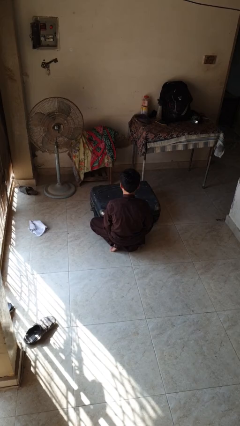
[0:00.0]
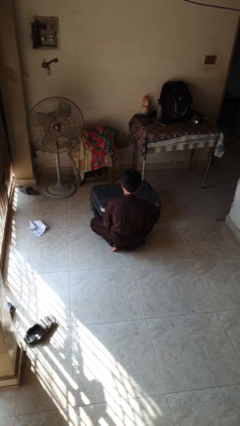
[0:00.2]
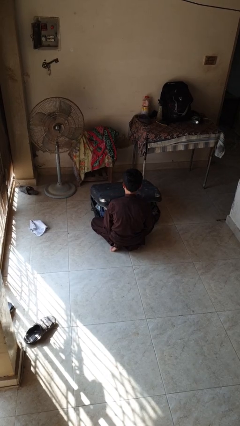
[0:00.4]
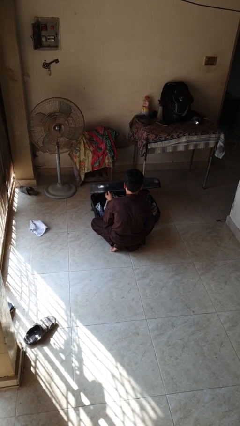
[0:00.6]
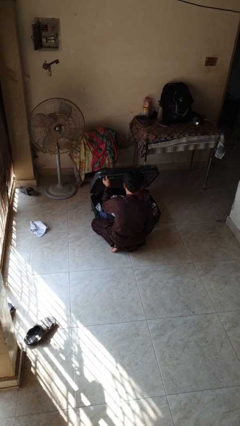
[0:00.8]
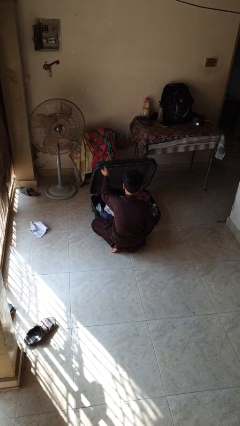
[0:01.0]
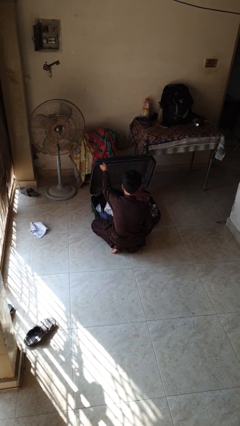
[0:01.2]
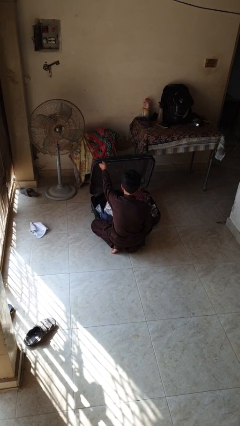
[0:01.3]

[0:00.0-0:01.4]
person opens suitcase

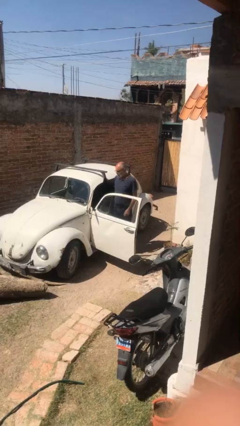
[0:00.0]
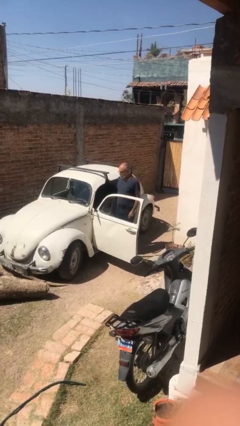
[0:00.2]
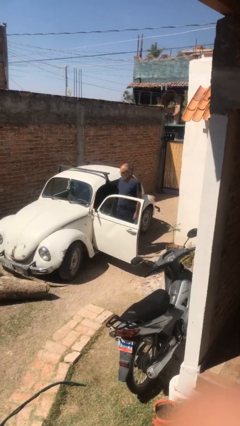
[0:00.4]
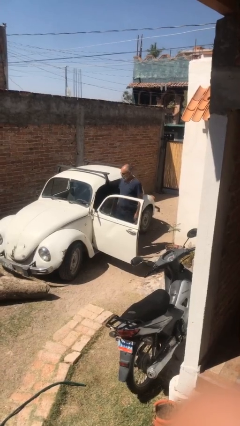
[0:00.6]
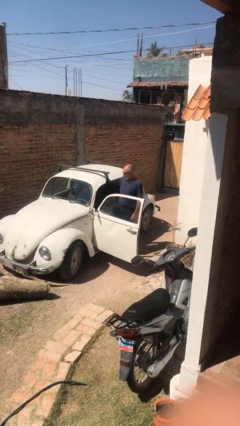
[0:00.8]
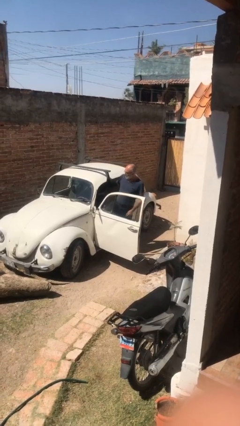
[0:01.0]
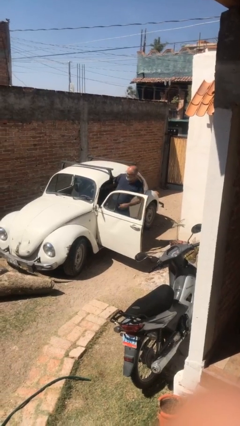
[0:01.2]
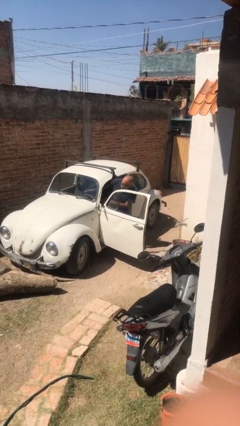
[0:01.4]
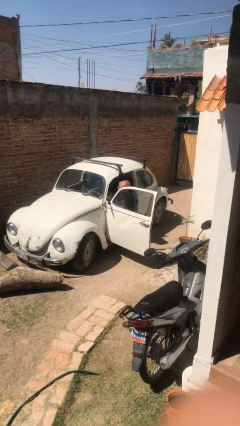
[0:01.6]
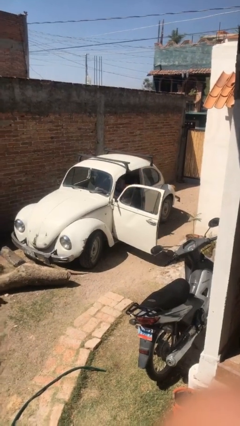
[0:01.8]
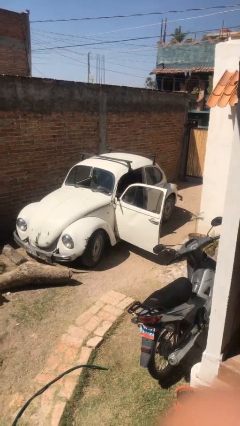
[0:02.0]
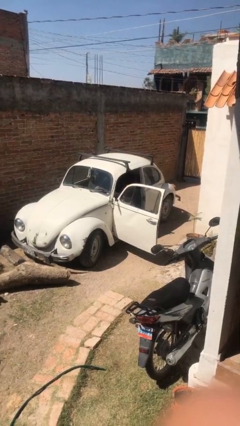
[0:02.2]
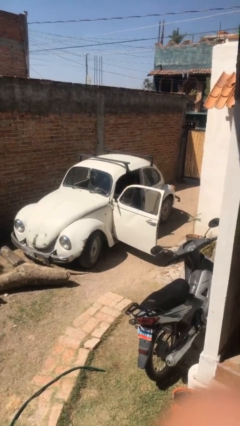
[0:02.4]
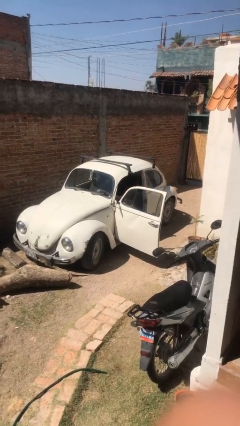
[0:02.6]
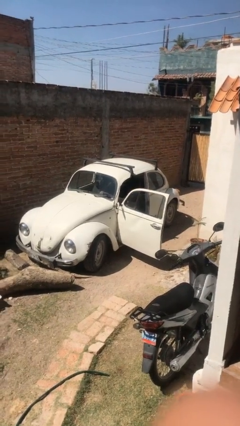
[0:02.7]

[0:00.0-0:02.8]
person enters car

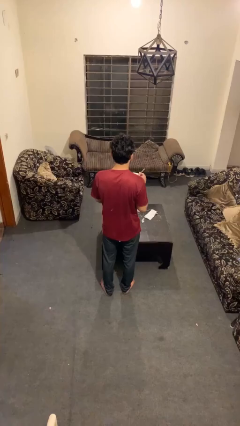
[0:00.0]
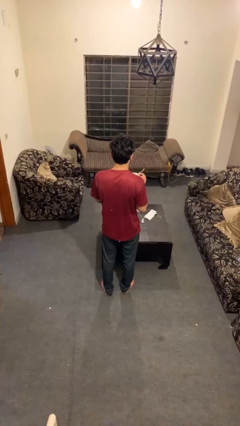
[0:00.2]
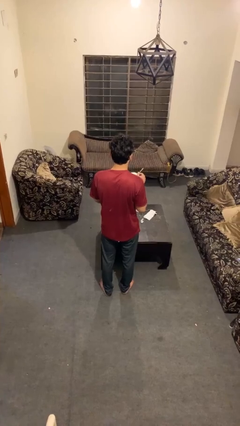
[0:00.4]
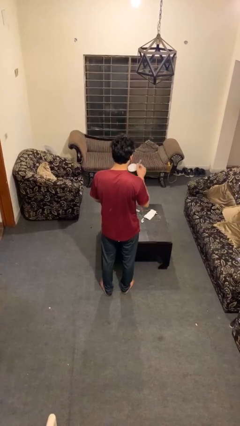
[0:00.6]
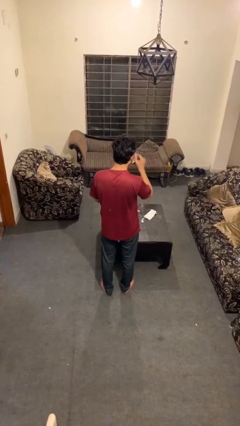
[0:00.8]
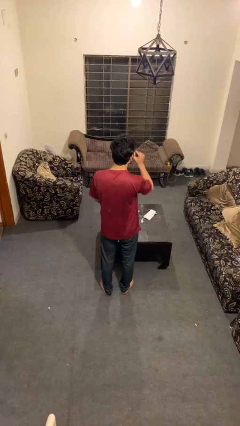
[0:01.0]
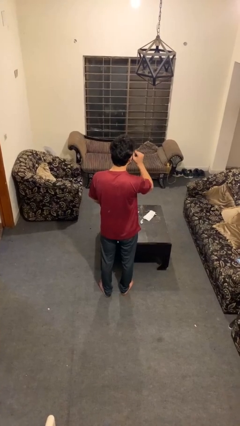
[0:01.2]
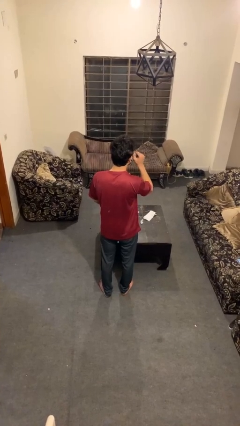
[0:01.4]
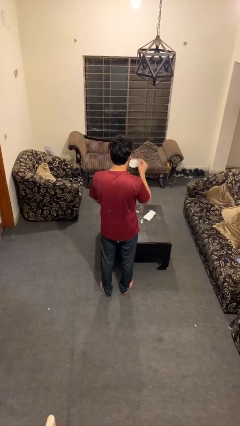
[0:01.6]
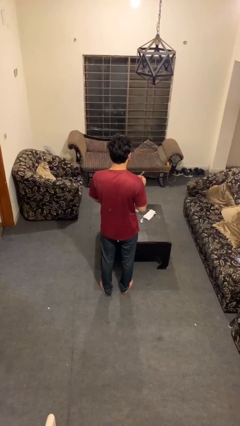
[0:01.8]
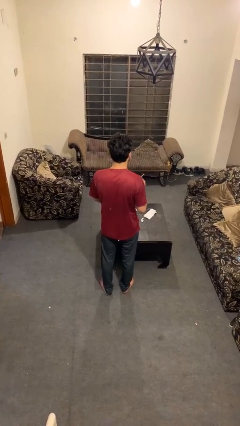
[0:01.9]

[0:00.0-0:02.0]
person drinks from mug

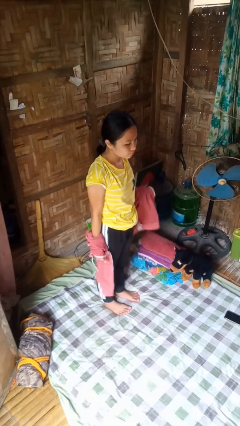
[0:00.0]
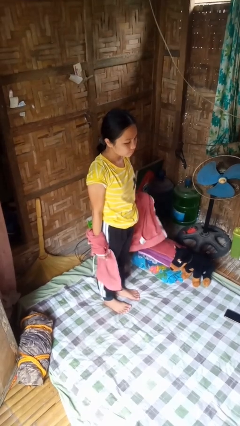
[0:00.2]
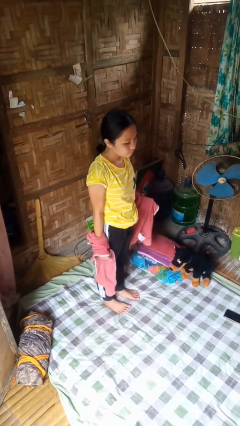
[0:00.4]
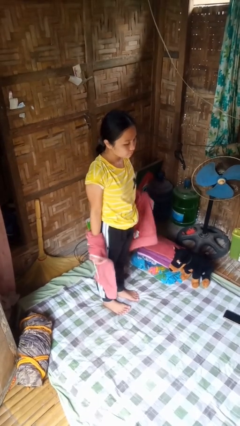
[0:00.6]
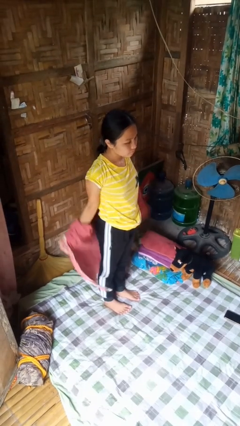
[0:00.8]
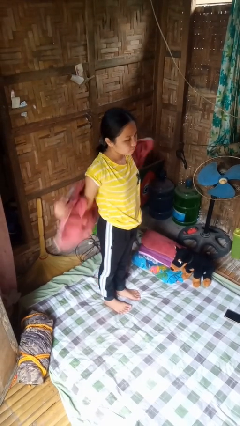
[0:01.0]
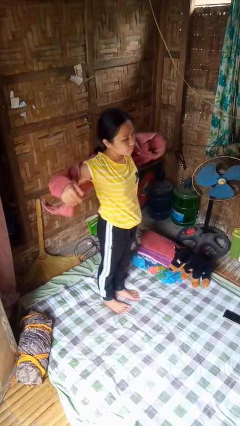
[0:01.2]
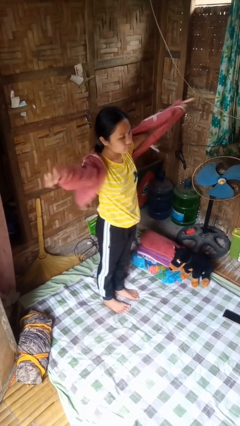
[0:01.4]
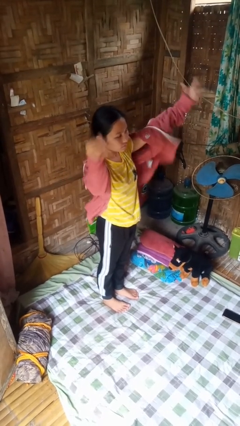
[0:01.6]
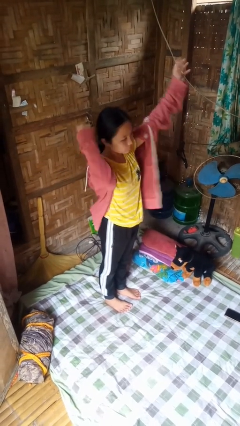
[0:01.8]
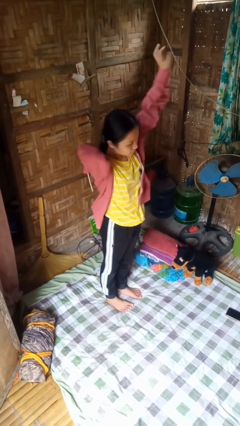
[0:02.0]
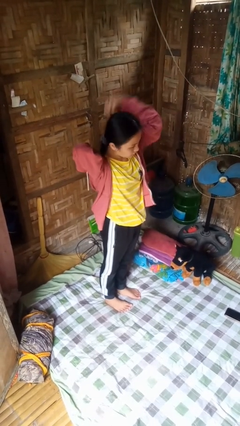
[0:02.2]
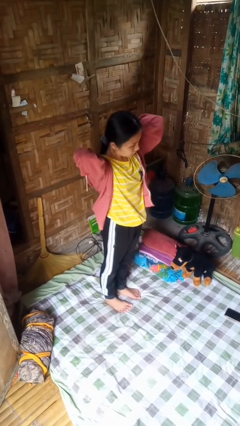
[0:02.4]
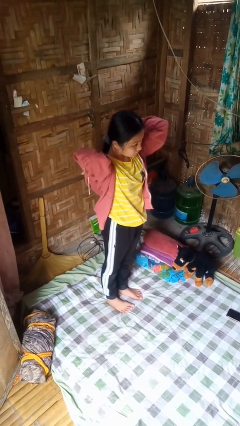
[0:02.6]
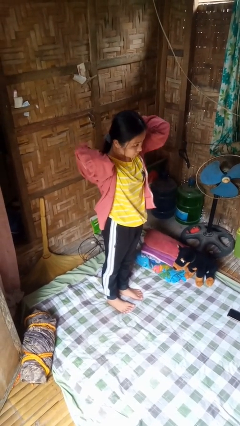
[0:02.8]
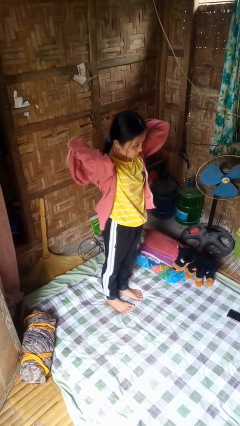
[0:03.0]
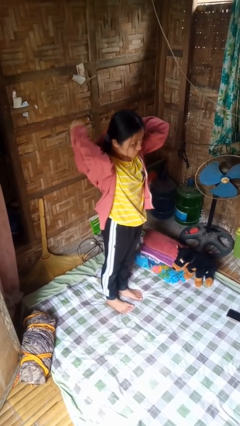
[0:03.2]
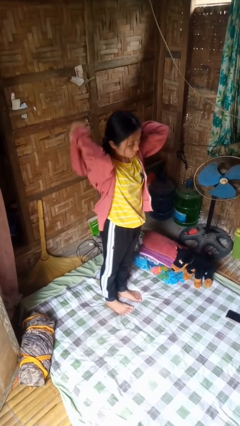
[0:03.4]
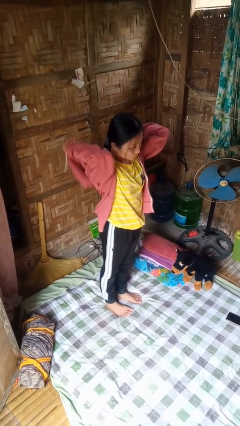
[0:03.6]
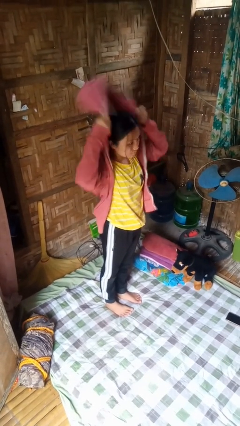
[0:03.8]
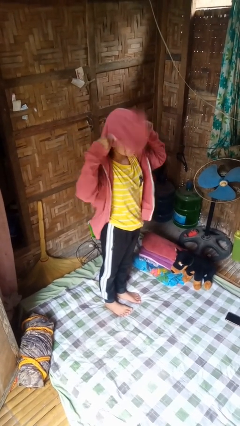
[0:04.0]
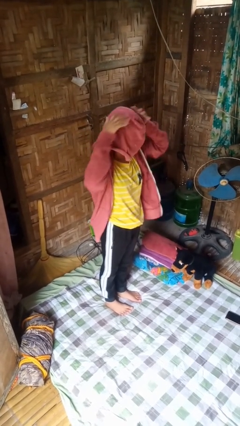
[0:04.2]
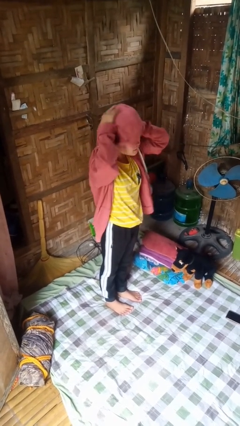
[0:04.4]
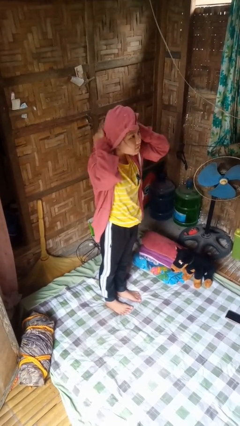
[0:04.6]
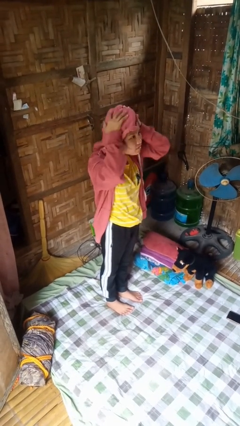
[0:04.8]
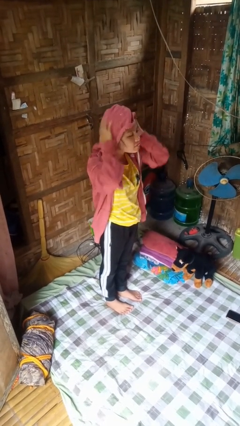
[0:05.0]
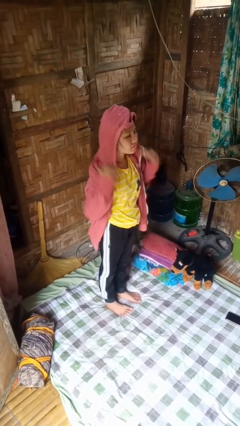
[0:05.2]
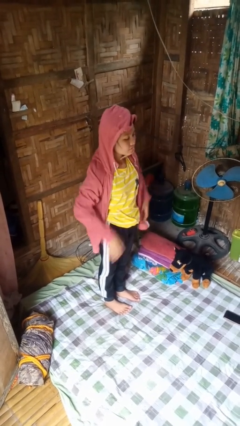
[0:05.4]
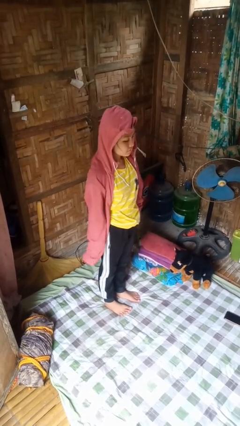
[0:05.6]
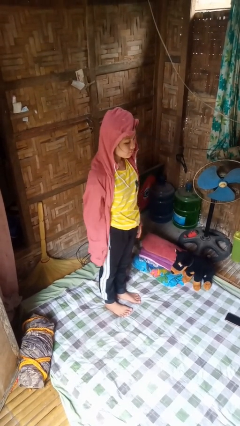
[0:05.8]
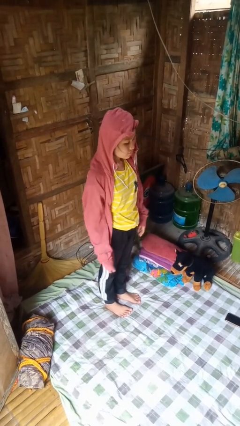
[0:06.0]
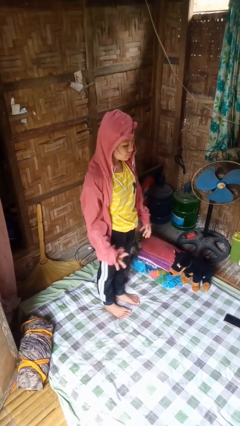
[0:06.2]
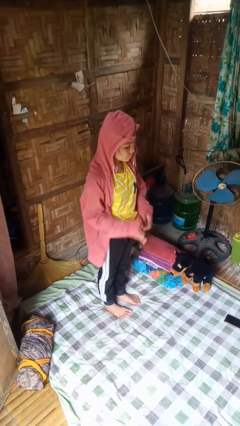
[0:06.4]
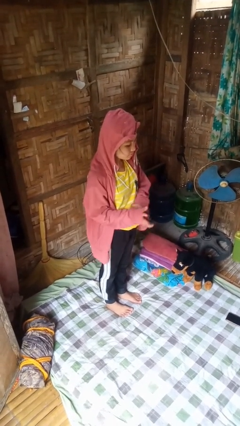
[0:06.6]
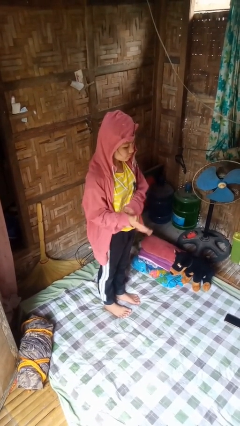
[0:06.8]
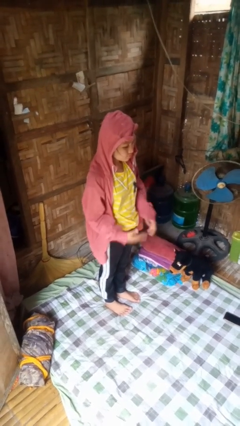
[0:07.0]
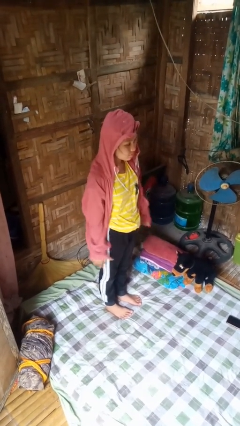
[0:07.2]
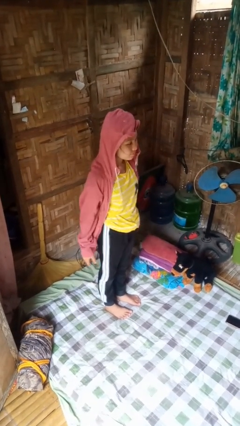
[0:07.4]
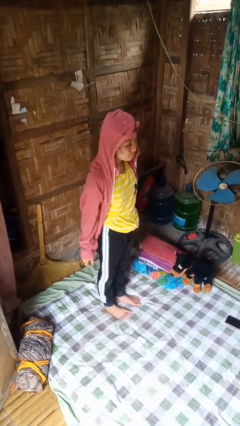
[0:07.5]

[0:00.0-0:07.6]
person puts on hoodie

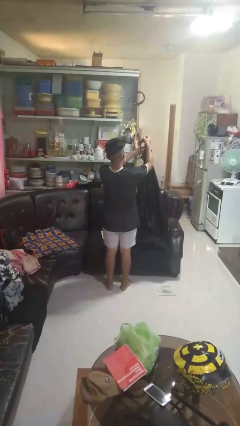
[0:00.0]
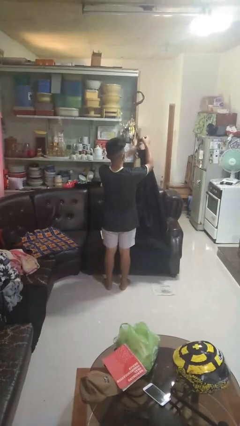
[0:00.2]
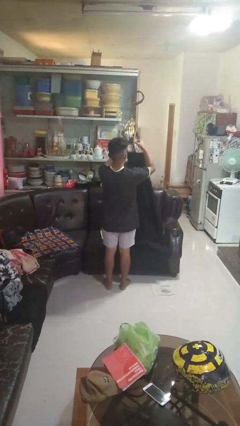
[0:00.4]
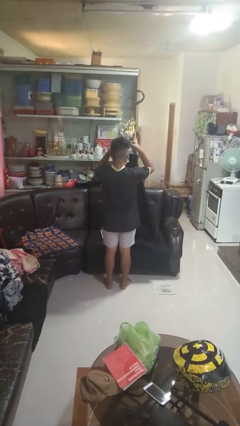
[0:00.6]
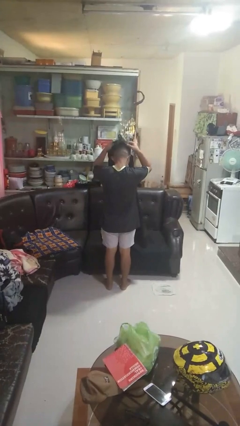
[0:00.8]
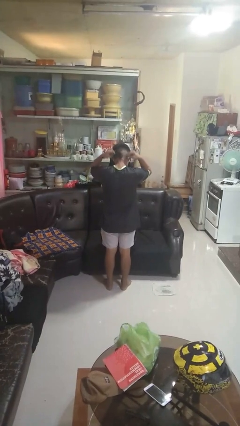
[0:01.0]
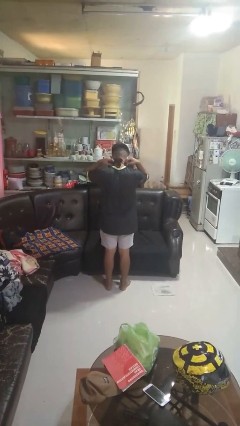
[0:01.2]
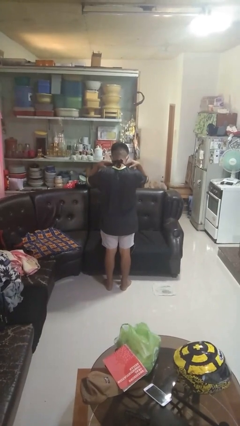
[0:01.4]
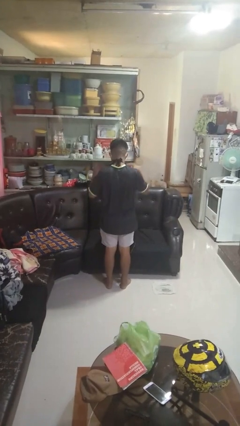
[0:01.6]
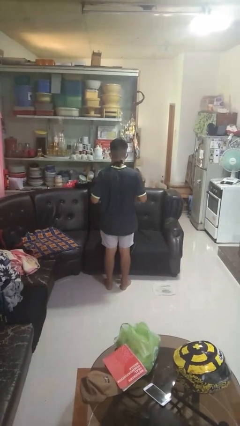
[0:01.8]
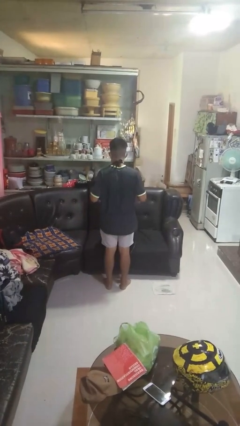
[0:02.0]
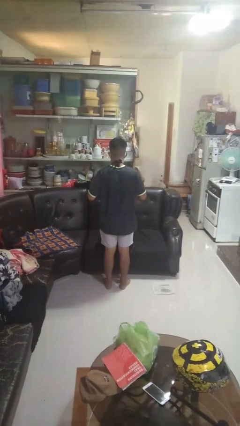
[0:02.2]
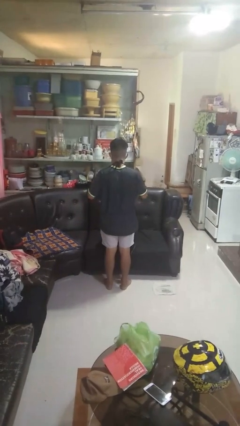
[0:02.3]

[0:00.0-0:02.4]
person puts on apron

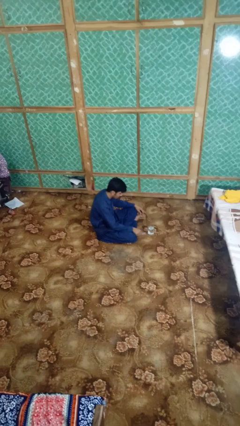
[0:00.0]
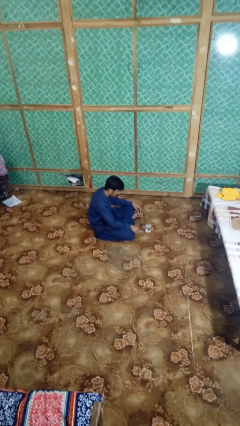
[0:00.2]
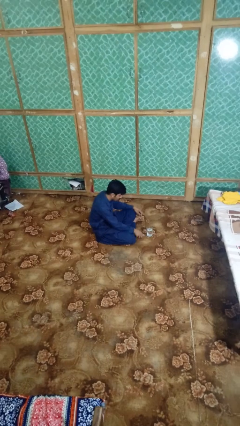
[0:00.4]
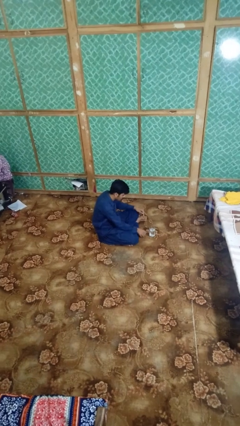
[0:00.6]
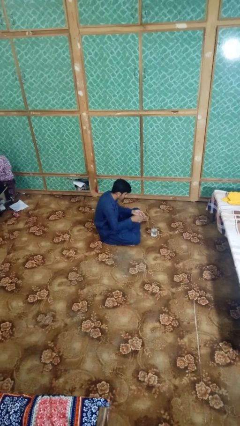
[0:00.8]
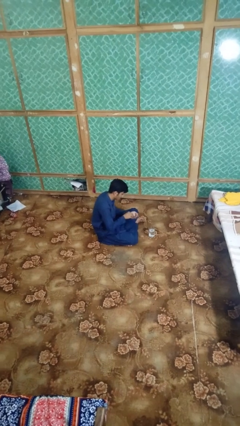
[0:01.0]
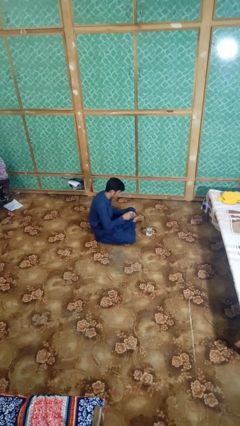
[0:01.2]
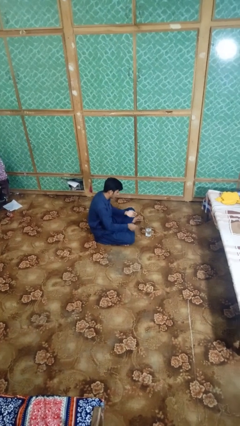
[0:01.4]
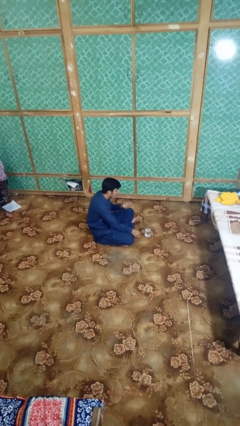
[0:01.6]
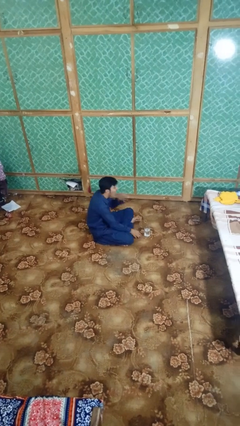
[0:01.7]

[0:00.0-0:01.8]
person takes medicine pills
